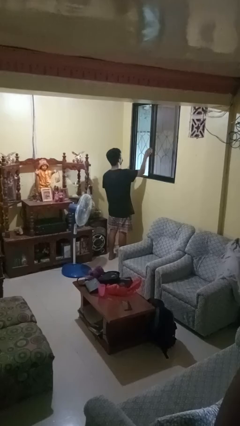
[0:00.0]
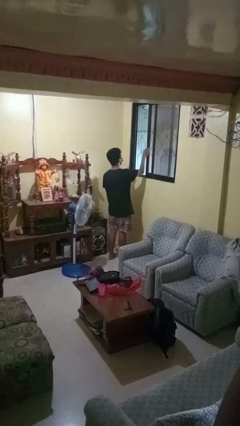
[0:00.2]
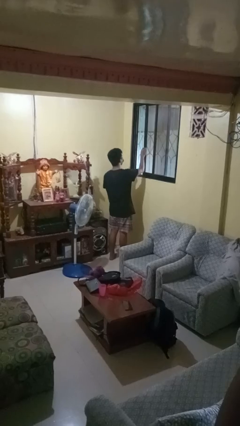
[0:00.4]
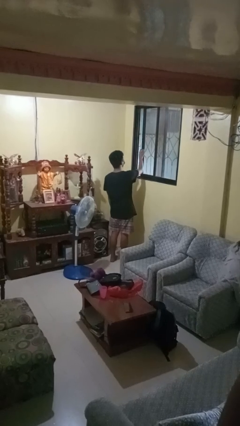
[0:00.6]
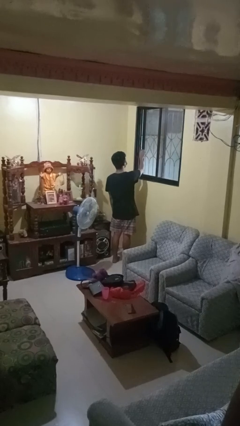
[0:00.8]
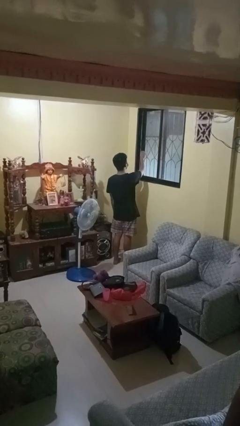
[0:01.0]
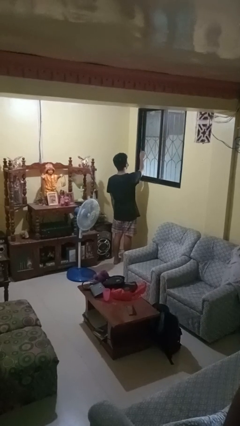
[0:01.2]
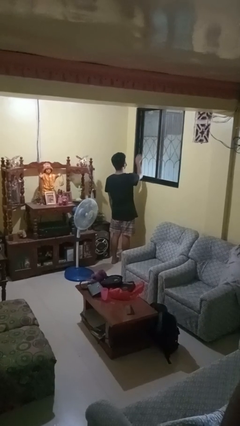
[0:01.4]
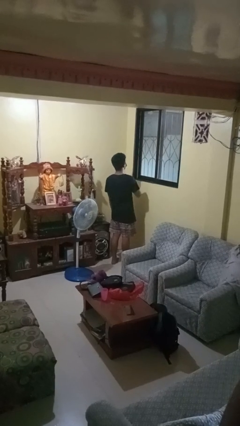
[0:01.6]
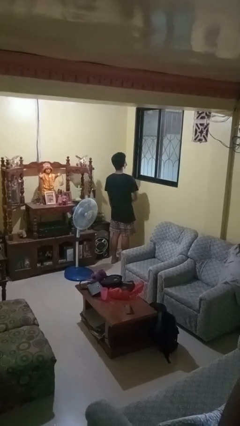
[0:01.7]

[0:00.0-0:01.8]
person closes home window

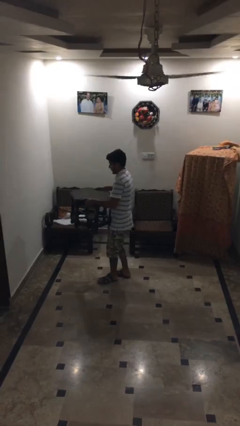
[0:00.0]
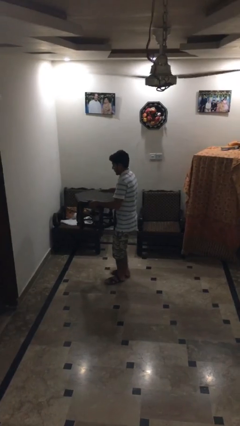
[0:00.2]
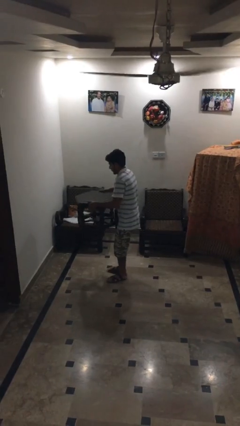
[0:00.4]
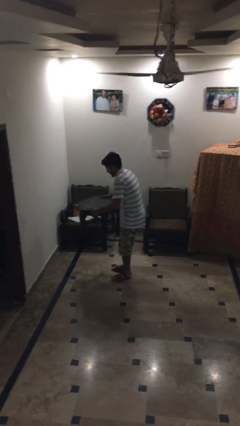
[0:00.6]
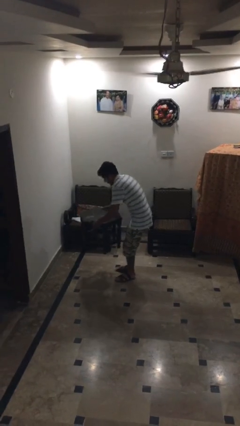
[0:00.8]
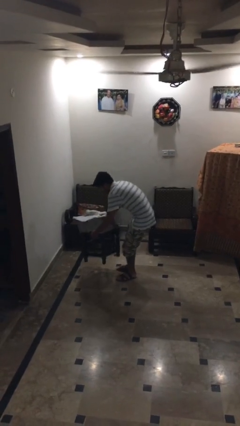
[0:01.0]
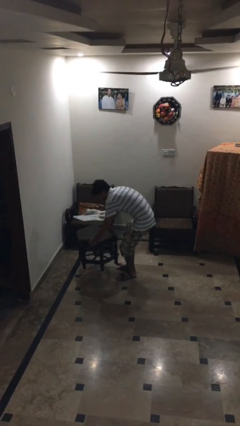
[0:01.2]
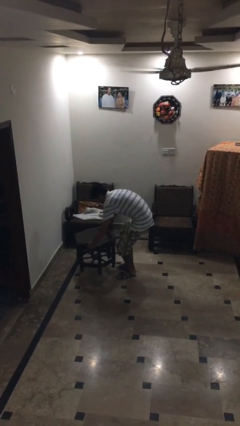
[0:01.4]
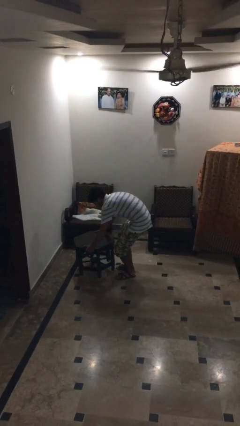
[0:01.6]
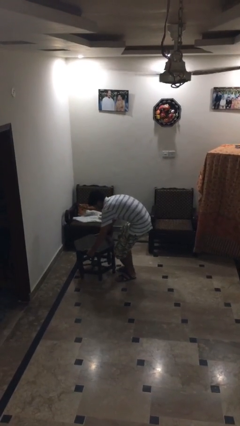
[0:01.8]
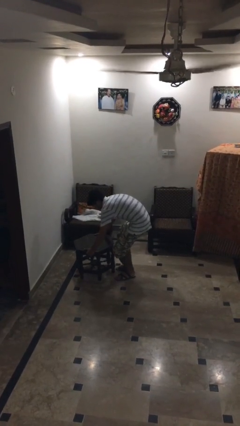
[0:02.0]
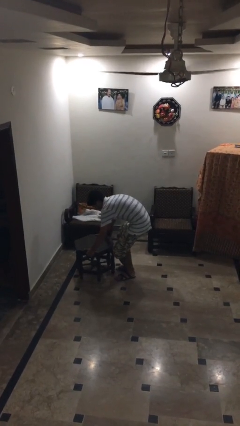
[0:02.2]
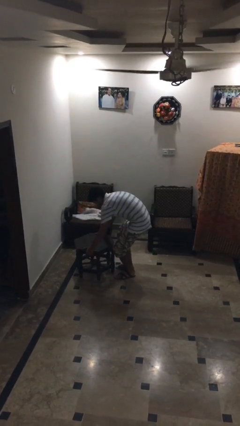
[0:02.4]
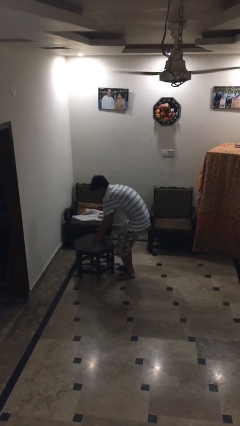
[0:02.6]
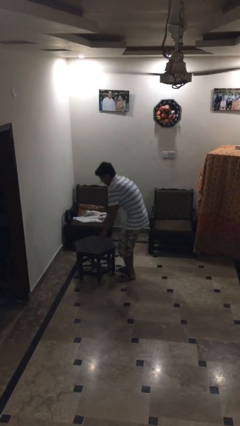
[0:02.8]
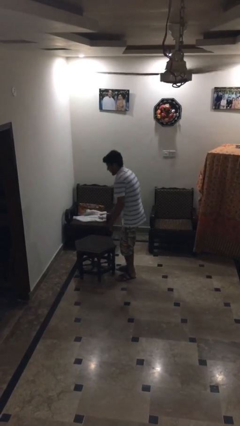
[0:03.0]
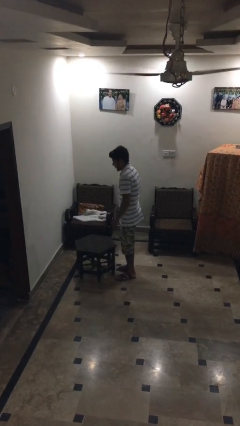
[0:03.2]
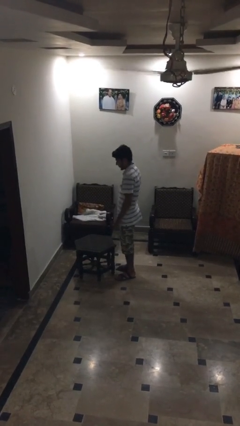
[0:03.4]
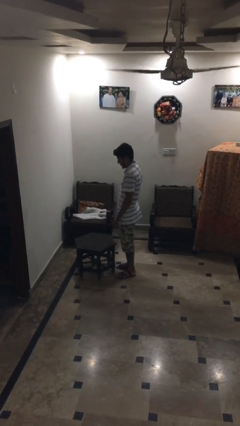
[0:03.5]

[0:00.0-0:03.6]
person puts down object on floor

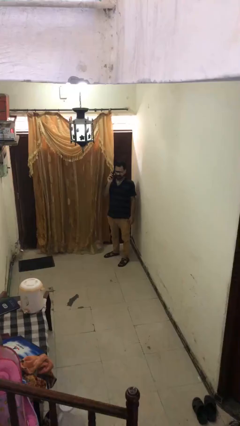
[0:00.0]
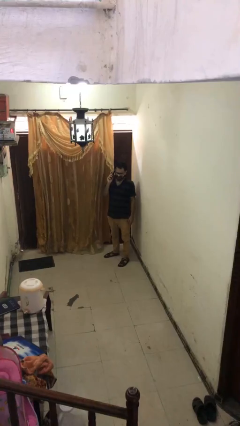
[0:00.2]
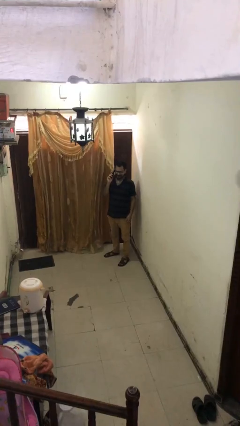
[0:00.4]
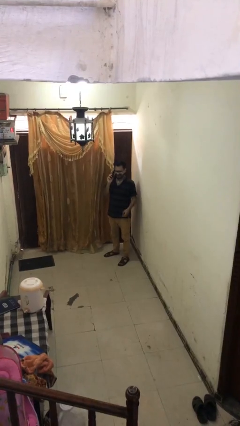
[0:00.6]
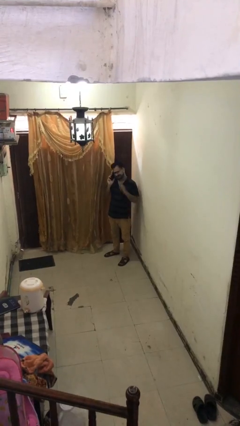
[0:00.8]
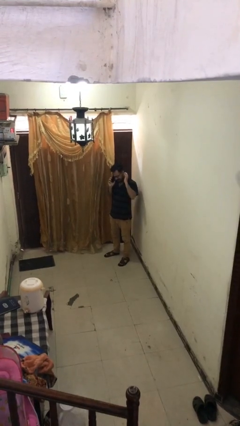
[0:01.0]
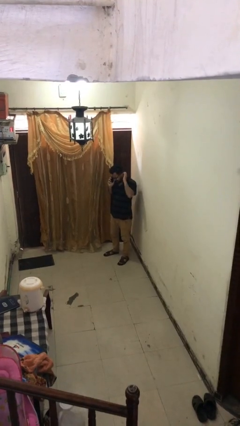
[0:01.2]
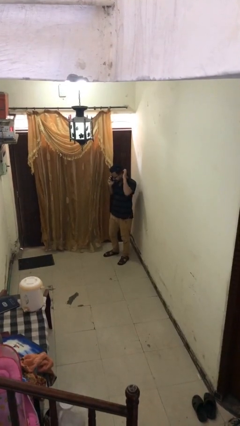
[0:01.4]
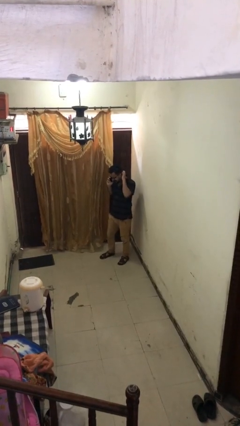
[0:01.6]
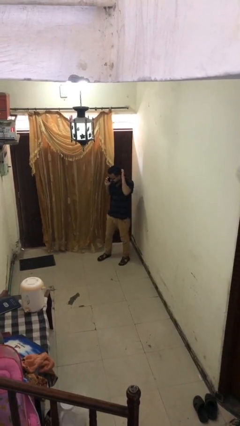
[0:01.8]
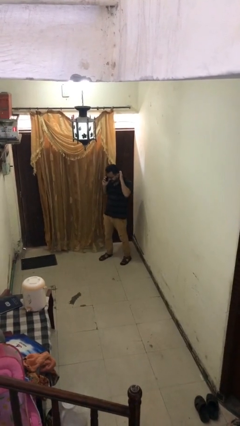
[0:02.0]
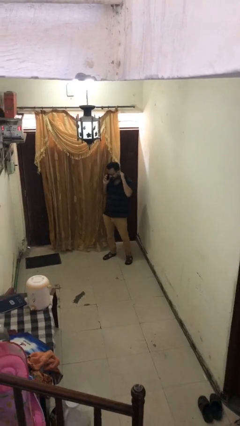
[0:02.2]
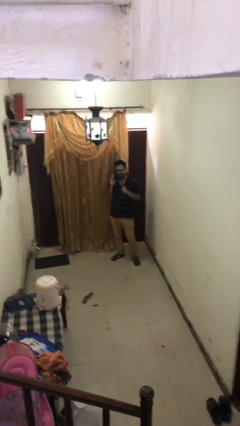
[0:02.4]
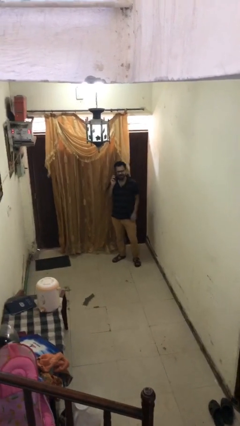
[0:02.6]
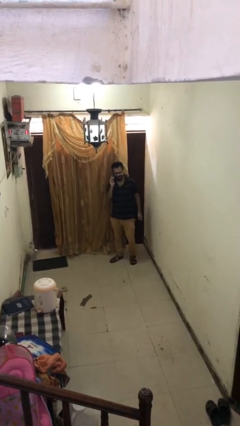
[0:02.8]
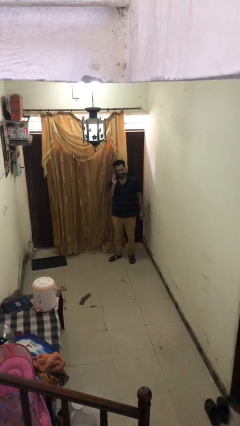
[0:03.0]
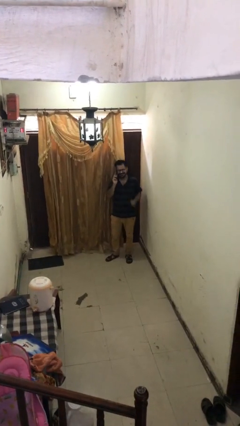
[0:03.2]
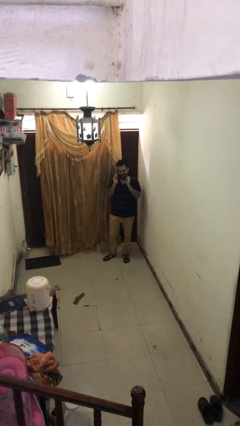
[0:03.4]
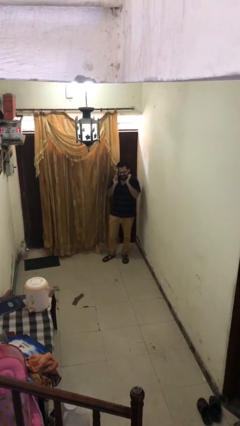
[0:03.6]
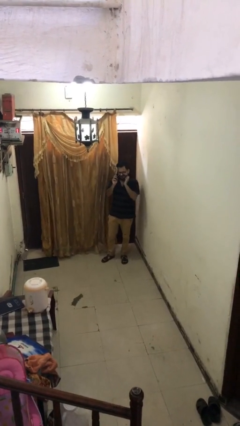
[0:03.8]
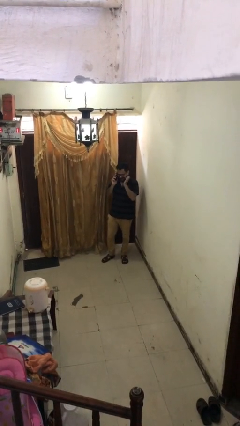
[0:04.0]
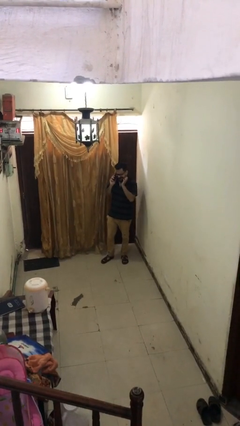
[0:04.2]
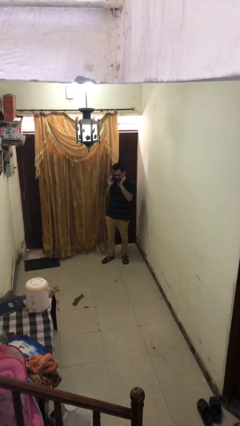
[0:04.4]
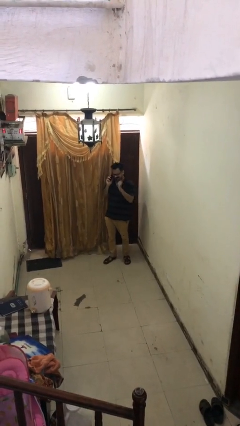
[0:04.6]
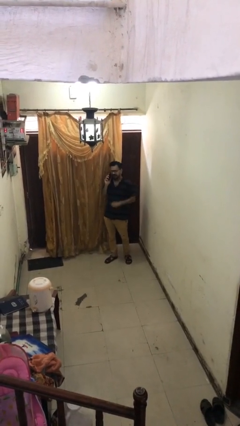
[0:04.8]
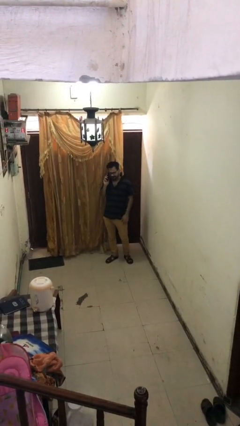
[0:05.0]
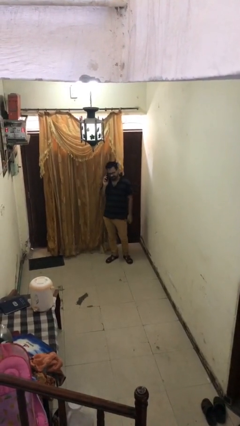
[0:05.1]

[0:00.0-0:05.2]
person talks on phone

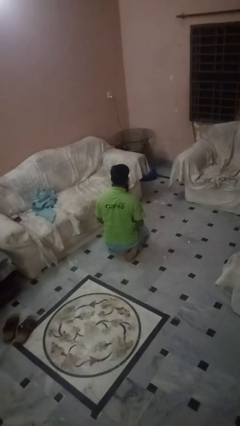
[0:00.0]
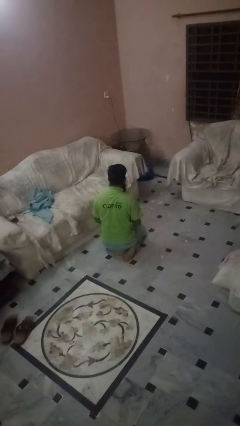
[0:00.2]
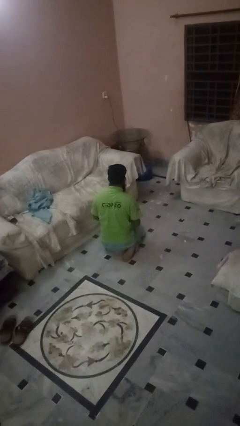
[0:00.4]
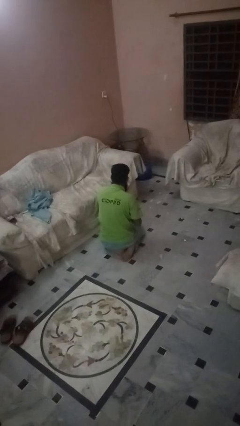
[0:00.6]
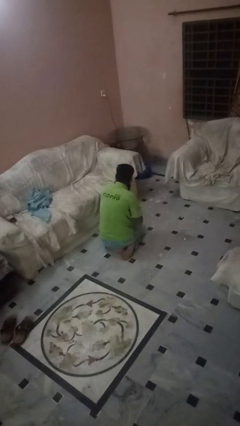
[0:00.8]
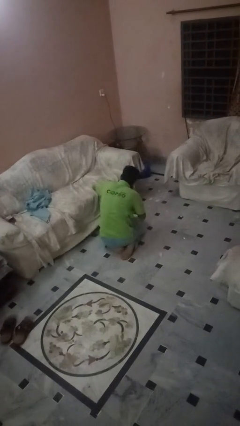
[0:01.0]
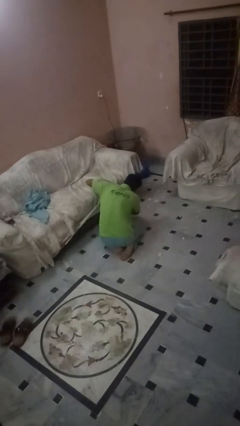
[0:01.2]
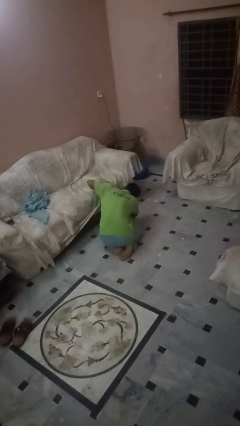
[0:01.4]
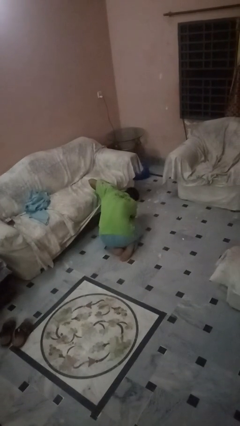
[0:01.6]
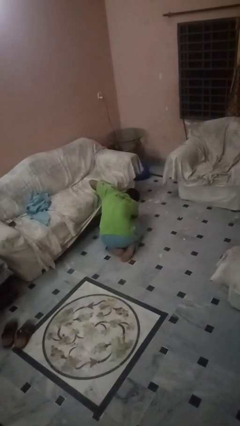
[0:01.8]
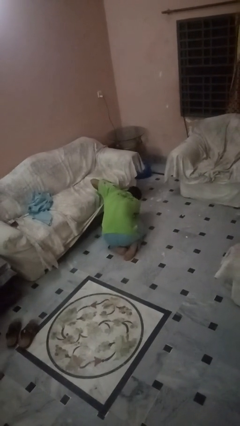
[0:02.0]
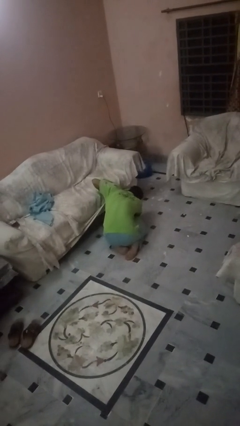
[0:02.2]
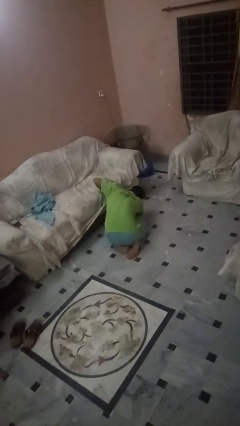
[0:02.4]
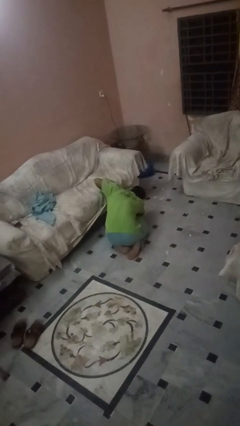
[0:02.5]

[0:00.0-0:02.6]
person searches under couch

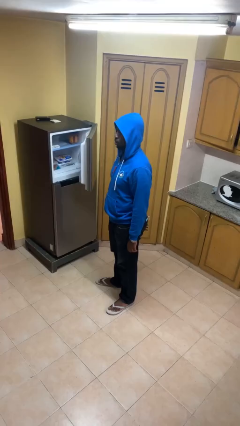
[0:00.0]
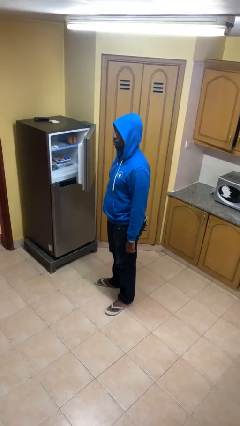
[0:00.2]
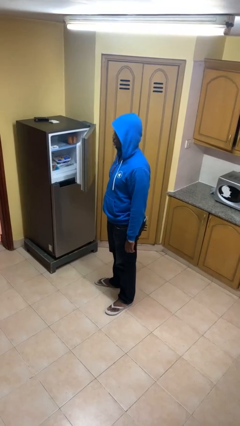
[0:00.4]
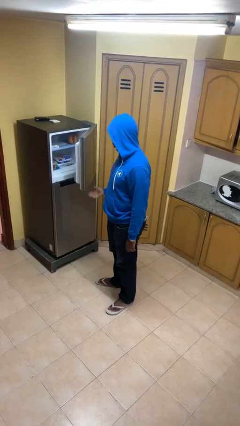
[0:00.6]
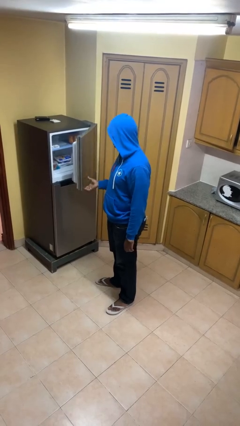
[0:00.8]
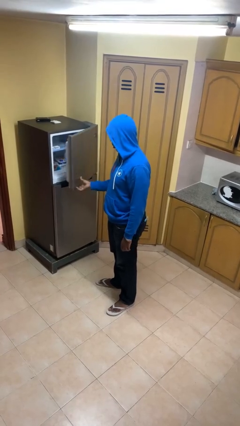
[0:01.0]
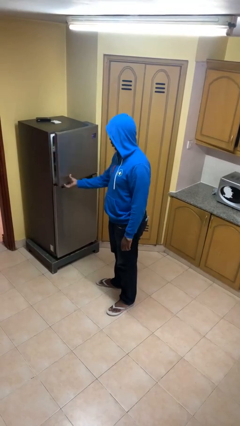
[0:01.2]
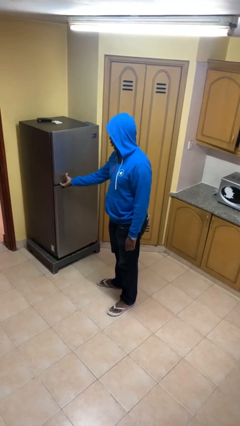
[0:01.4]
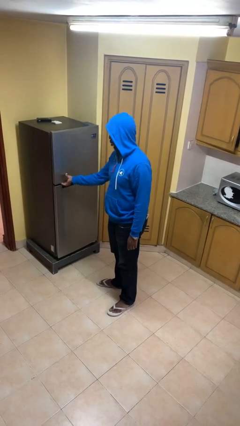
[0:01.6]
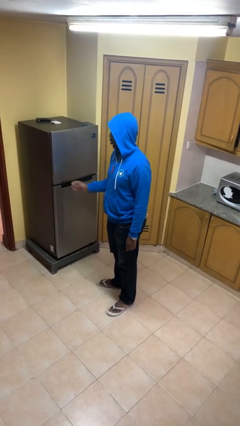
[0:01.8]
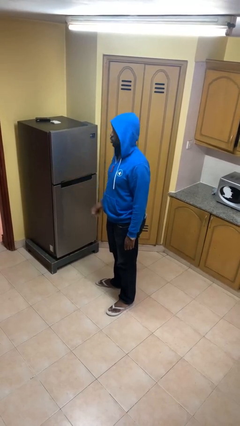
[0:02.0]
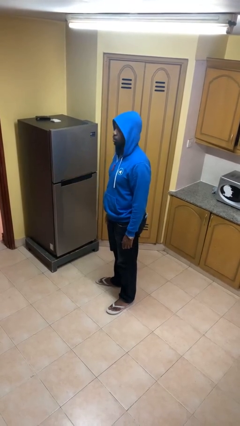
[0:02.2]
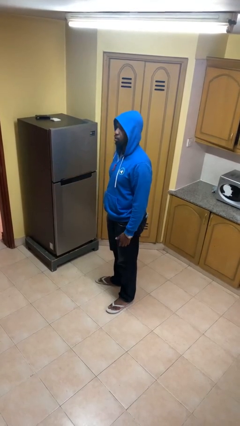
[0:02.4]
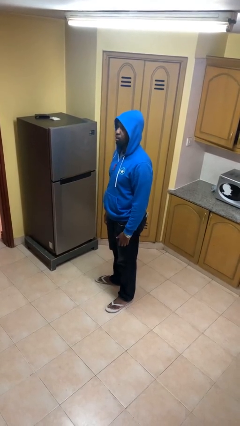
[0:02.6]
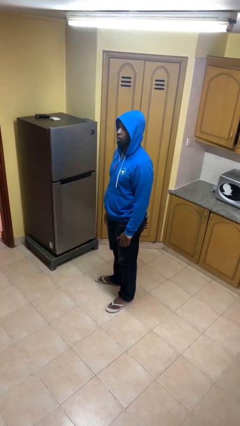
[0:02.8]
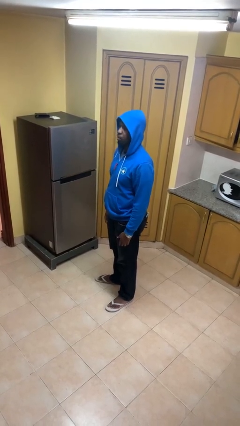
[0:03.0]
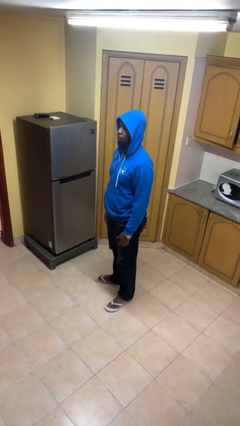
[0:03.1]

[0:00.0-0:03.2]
person closes refrigerator

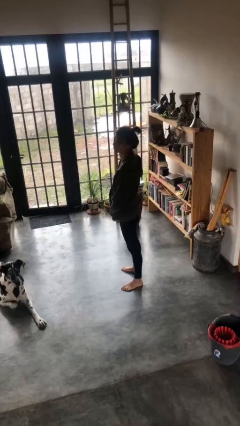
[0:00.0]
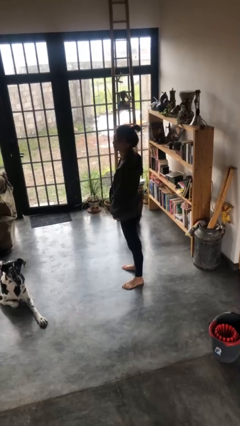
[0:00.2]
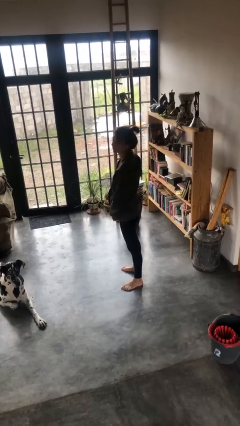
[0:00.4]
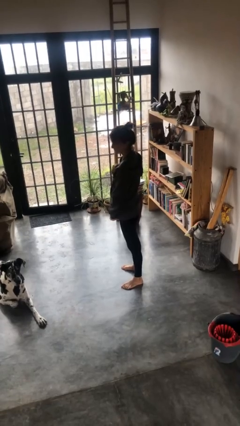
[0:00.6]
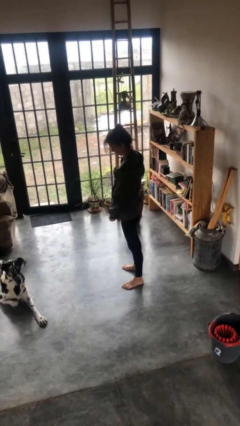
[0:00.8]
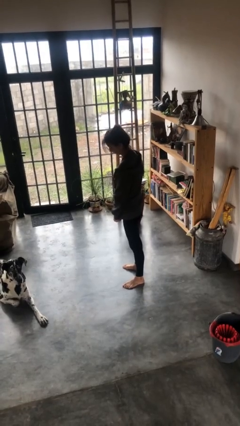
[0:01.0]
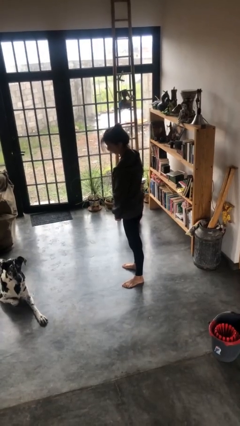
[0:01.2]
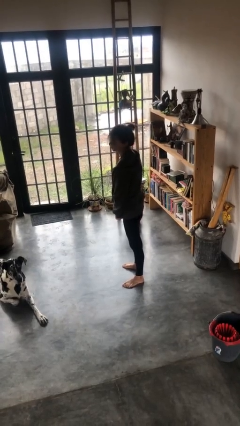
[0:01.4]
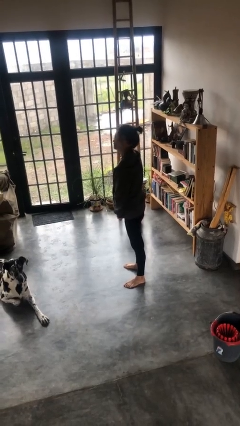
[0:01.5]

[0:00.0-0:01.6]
person unzips jacket
